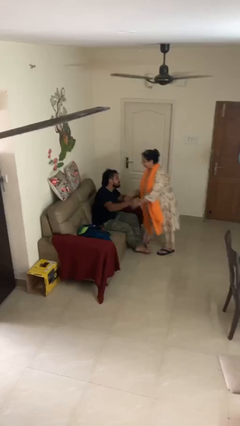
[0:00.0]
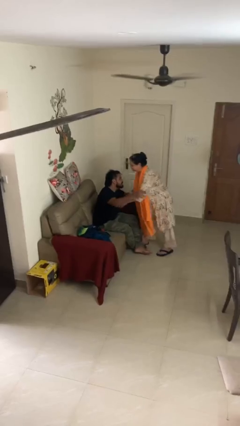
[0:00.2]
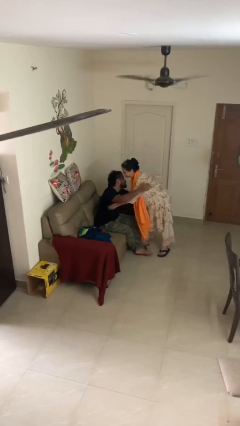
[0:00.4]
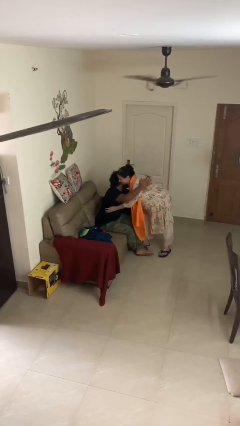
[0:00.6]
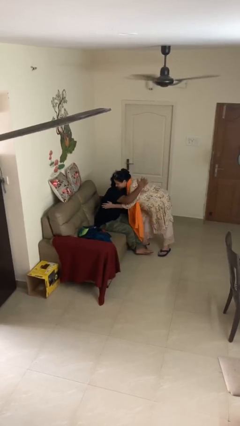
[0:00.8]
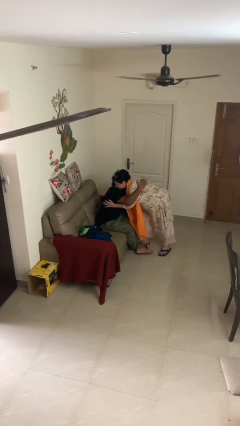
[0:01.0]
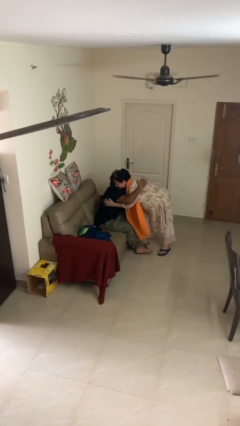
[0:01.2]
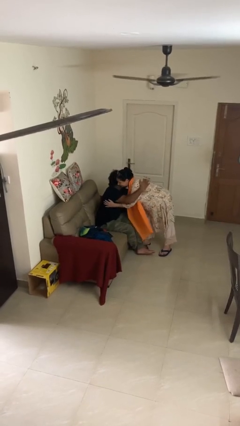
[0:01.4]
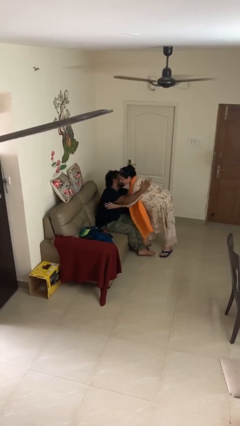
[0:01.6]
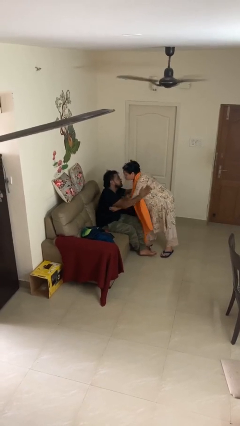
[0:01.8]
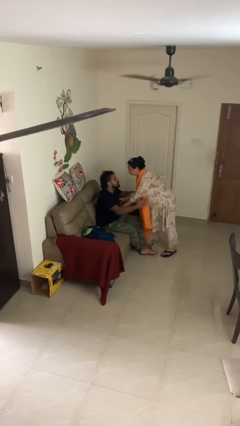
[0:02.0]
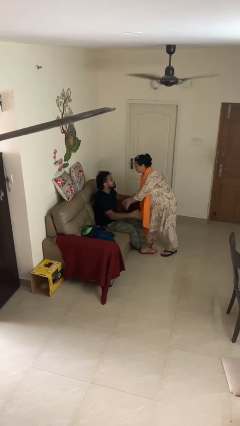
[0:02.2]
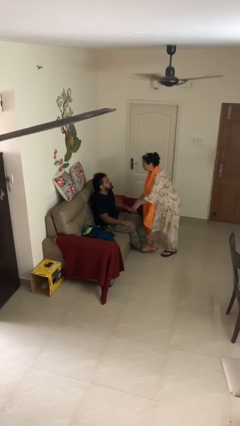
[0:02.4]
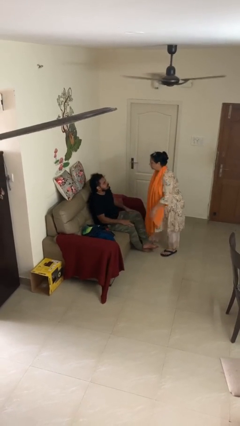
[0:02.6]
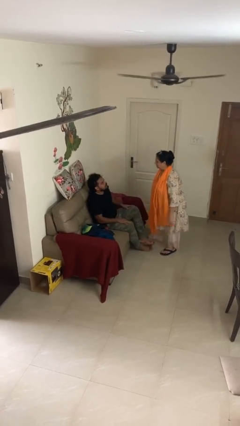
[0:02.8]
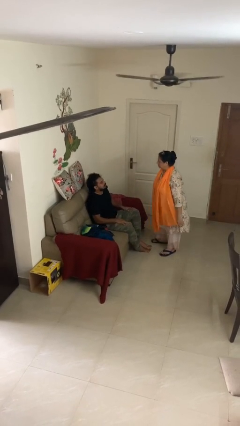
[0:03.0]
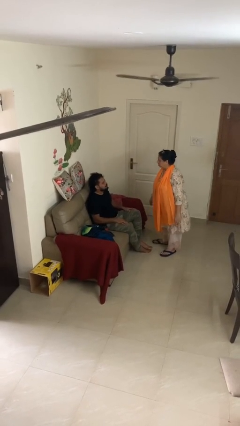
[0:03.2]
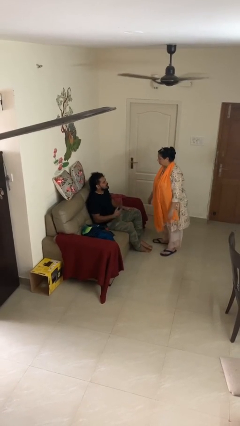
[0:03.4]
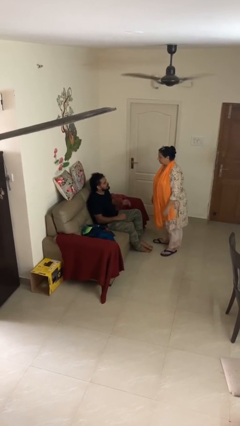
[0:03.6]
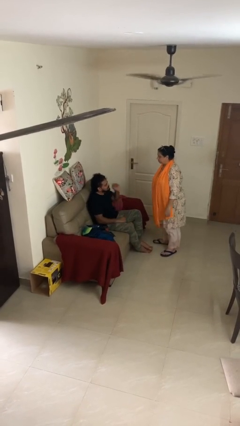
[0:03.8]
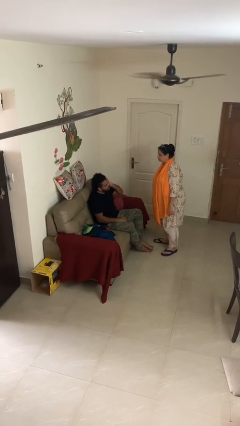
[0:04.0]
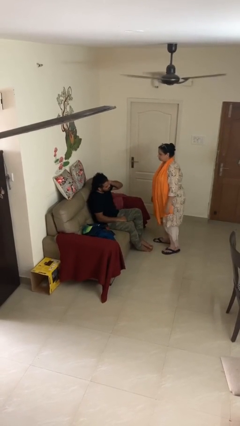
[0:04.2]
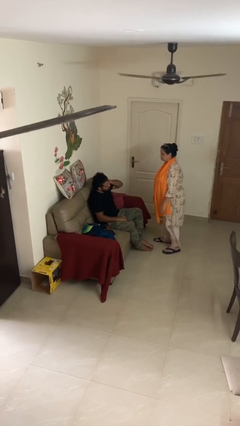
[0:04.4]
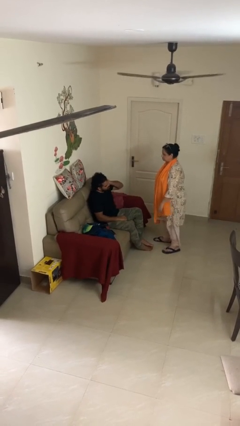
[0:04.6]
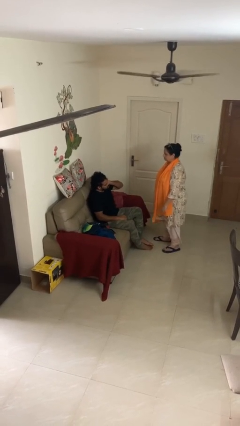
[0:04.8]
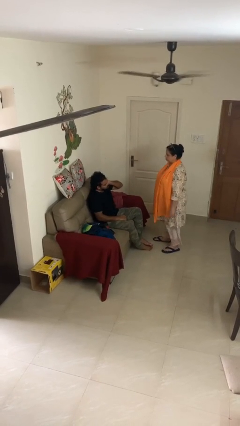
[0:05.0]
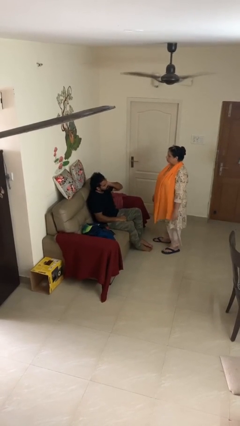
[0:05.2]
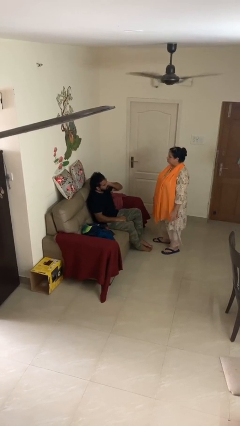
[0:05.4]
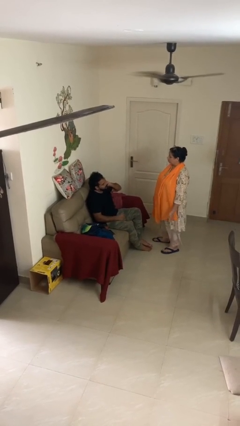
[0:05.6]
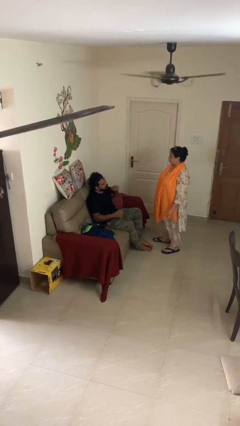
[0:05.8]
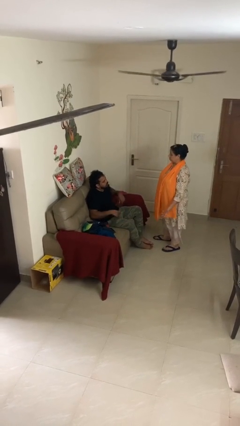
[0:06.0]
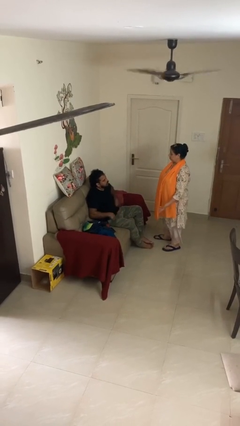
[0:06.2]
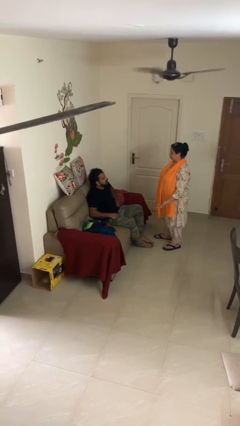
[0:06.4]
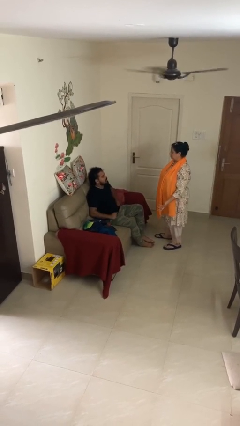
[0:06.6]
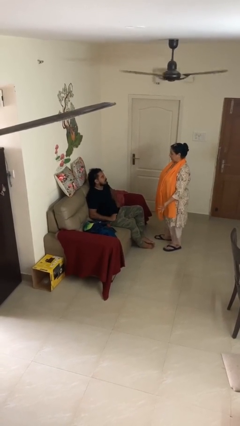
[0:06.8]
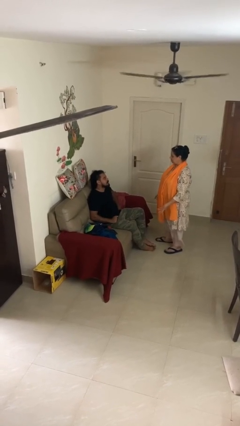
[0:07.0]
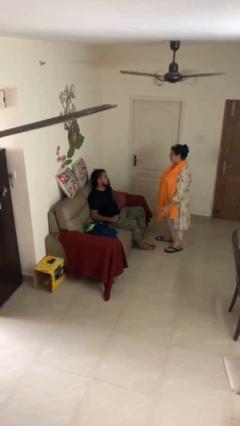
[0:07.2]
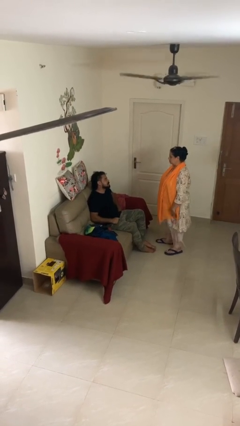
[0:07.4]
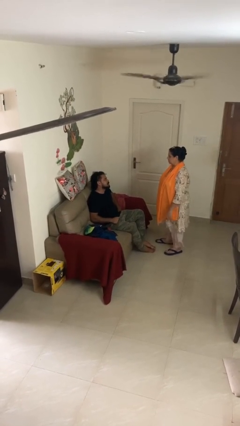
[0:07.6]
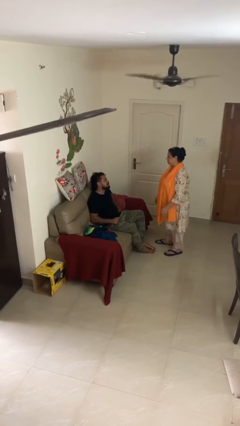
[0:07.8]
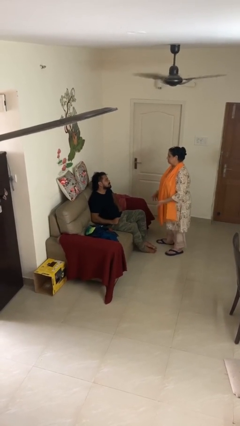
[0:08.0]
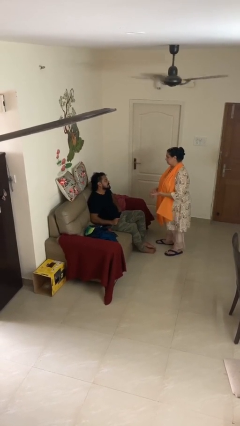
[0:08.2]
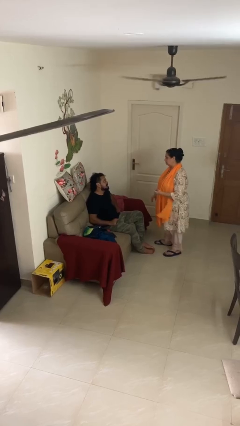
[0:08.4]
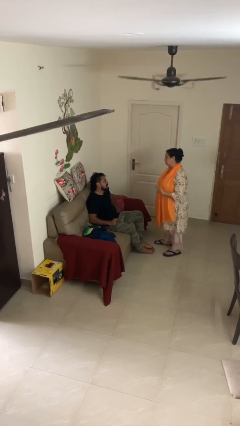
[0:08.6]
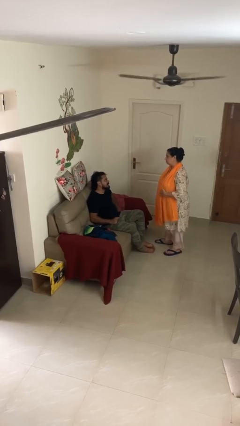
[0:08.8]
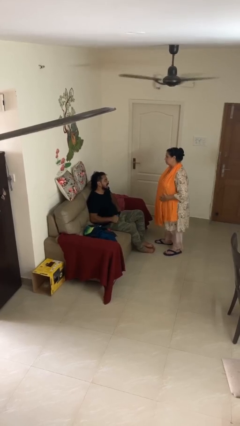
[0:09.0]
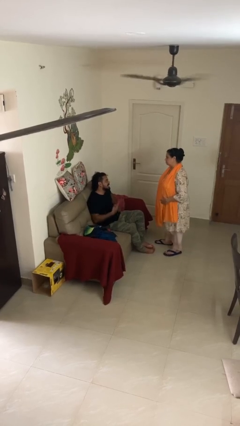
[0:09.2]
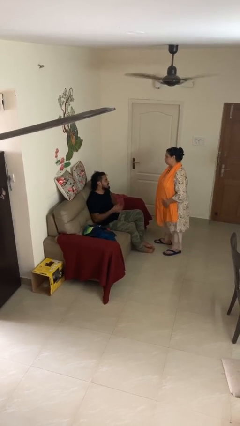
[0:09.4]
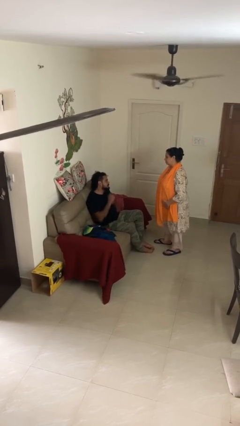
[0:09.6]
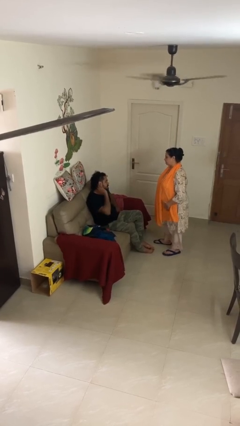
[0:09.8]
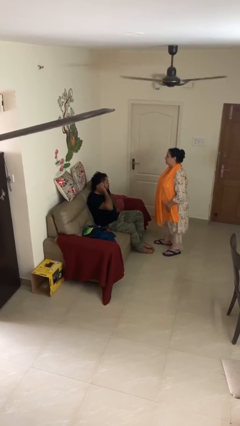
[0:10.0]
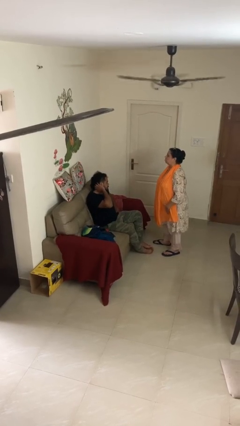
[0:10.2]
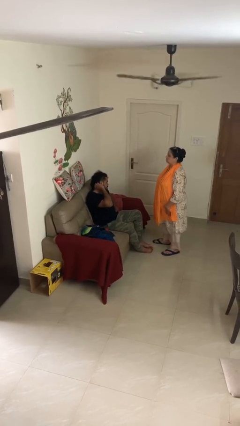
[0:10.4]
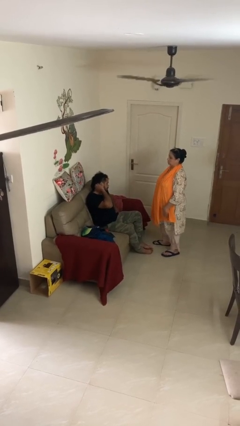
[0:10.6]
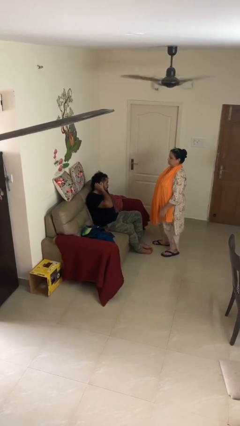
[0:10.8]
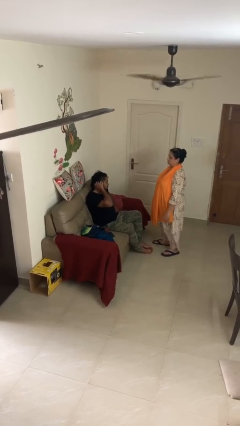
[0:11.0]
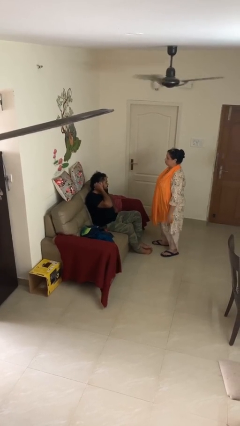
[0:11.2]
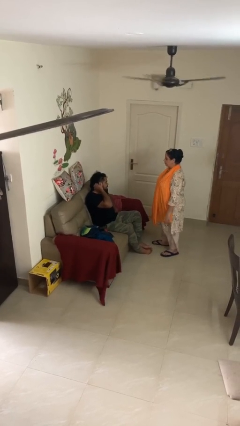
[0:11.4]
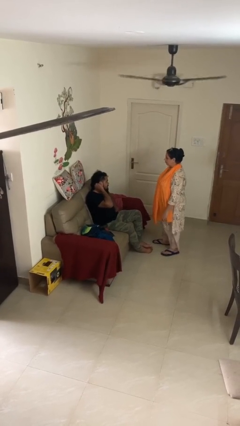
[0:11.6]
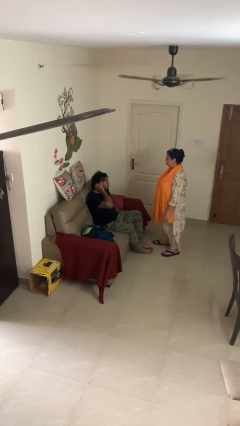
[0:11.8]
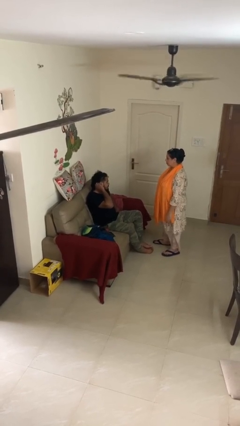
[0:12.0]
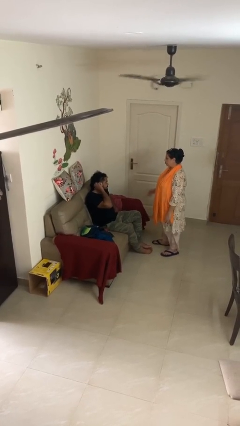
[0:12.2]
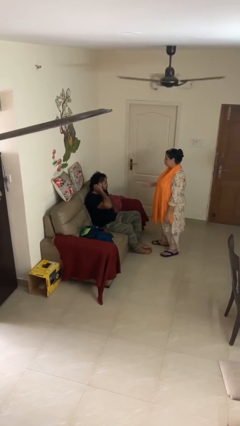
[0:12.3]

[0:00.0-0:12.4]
person embraces person

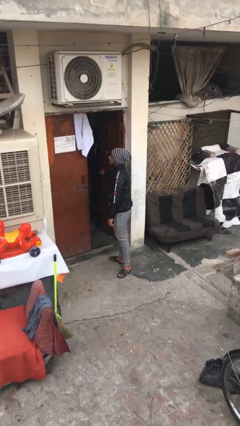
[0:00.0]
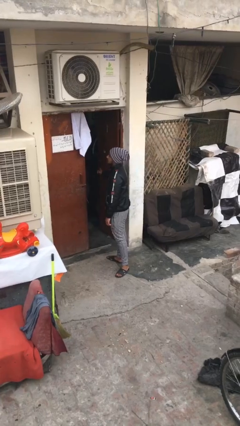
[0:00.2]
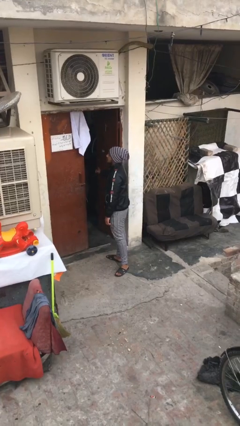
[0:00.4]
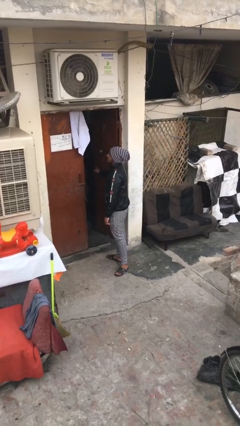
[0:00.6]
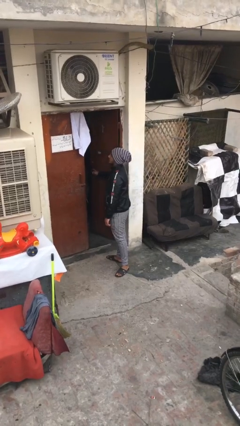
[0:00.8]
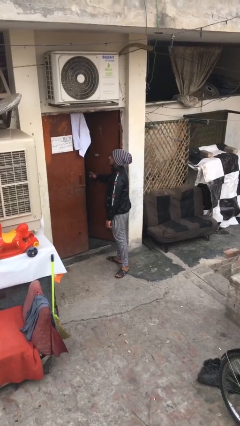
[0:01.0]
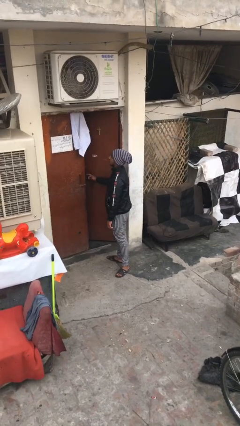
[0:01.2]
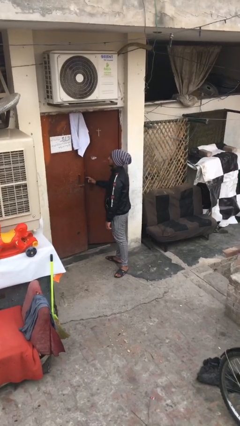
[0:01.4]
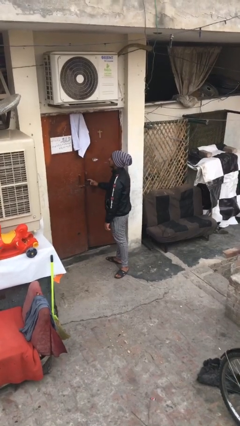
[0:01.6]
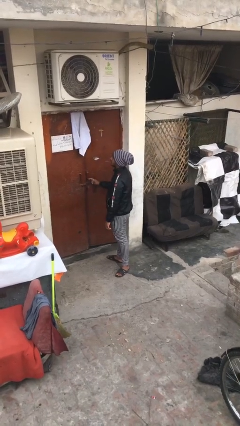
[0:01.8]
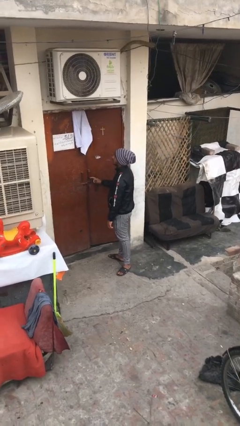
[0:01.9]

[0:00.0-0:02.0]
person closes facility door

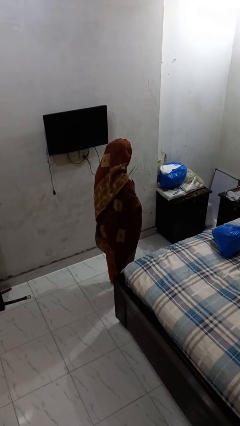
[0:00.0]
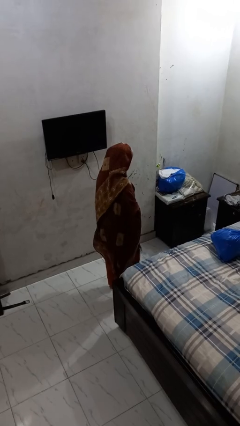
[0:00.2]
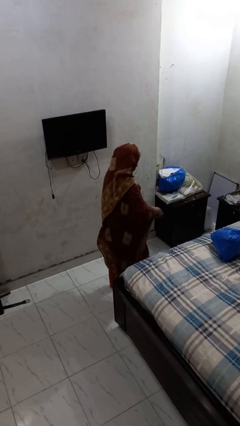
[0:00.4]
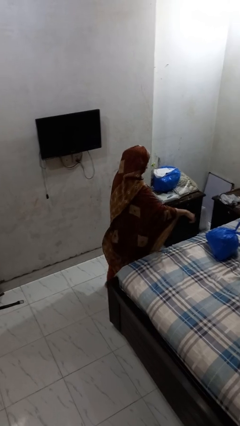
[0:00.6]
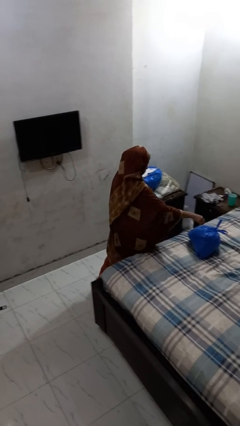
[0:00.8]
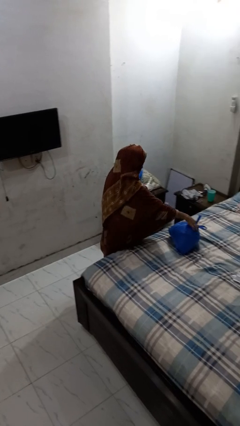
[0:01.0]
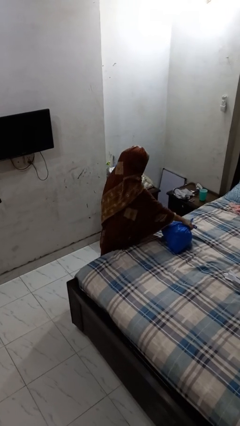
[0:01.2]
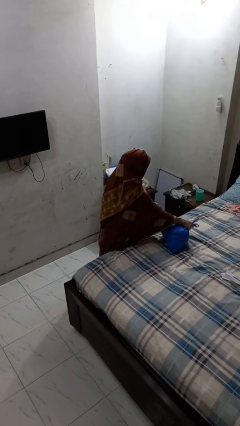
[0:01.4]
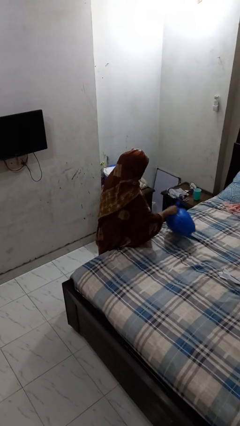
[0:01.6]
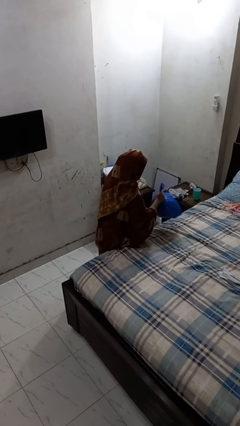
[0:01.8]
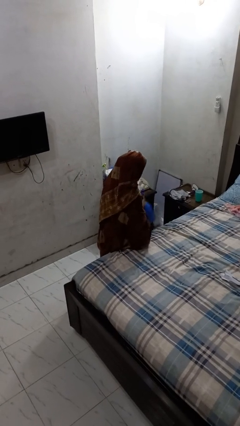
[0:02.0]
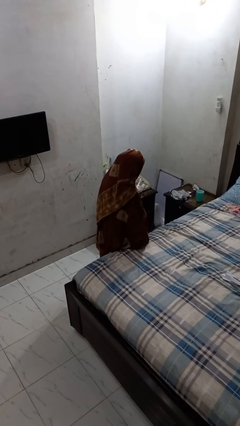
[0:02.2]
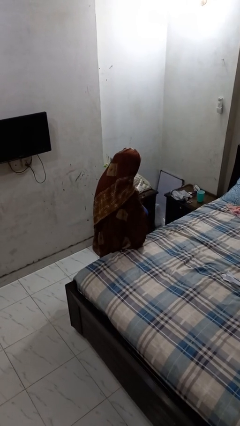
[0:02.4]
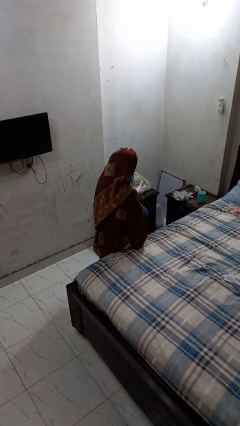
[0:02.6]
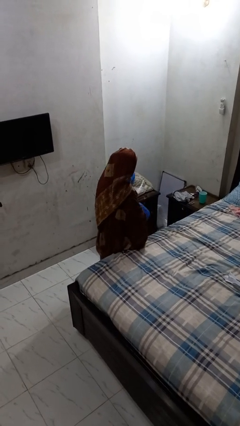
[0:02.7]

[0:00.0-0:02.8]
person picks up object from bed

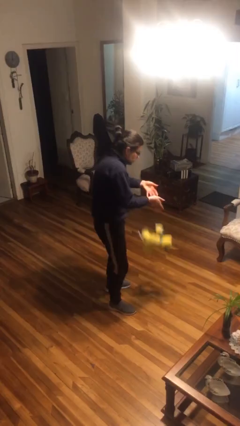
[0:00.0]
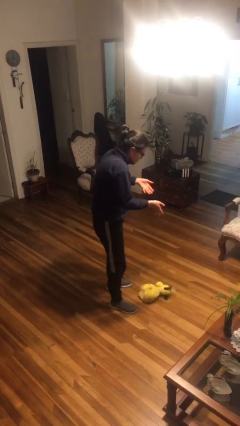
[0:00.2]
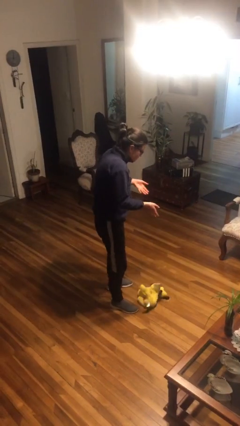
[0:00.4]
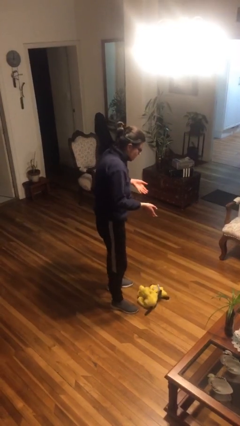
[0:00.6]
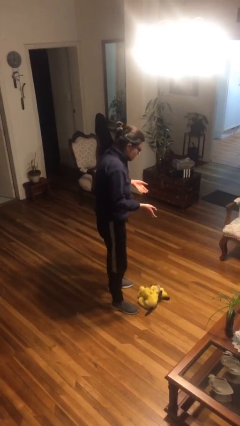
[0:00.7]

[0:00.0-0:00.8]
person drops object
